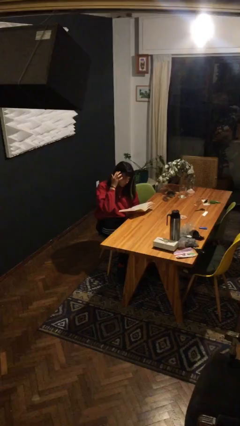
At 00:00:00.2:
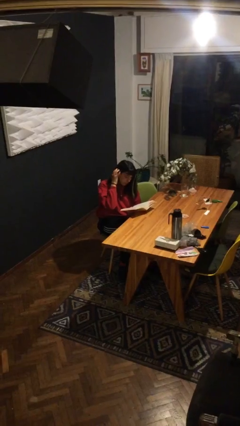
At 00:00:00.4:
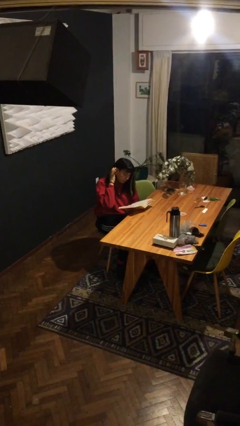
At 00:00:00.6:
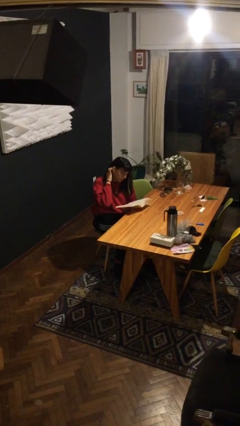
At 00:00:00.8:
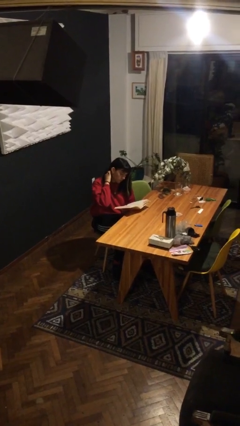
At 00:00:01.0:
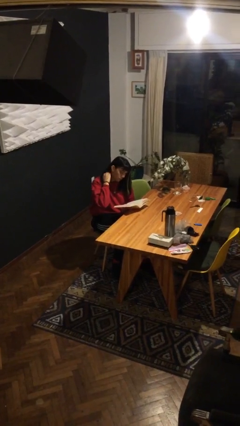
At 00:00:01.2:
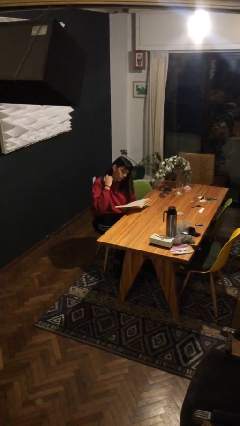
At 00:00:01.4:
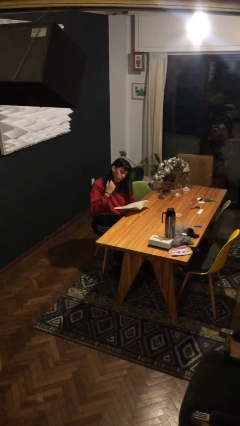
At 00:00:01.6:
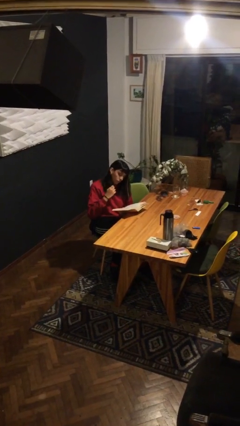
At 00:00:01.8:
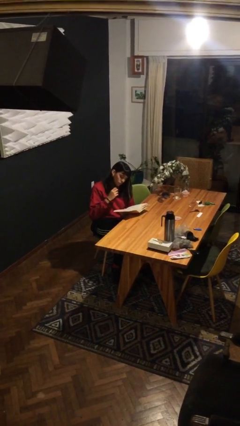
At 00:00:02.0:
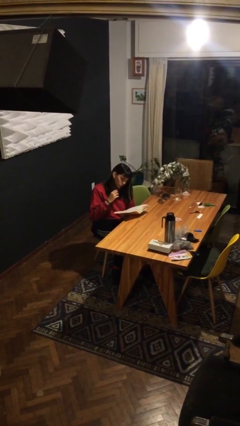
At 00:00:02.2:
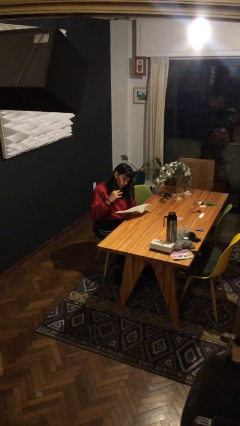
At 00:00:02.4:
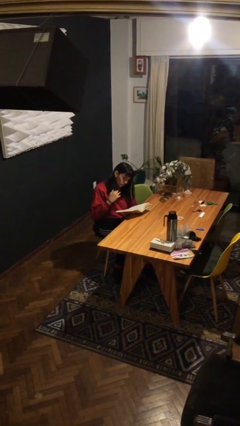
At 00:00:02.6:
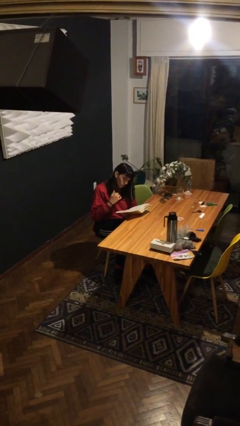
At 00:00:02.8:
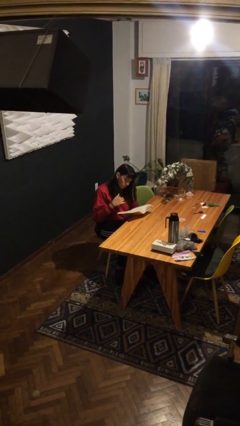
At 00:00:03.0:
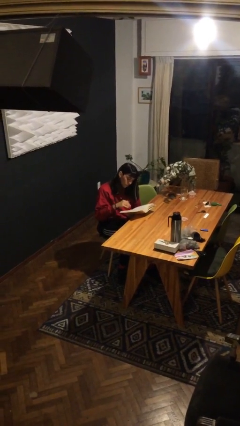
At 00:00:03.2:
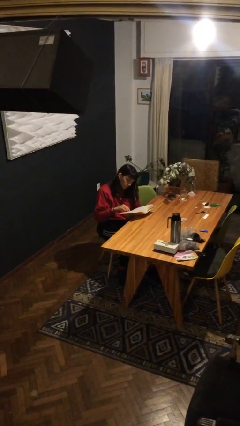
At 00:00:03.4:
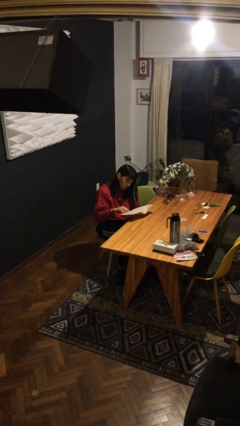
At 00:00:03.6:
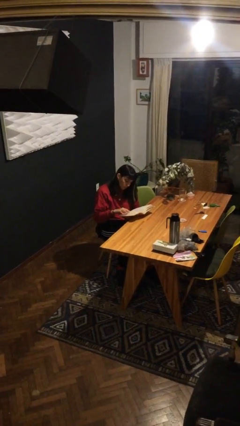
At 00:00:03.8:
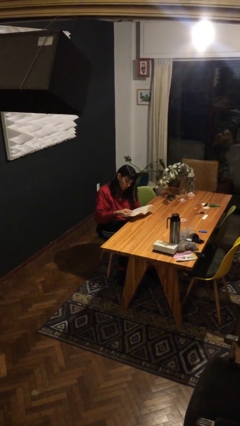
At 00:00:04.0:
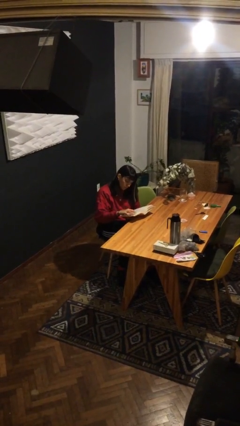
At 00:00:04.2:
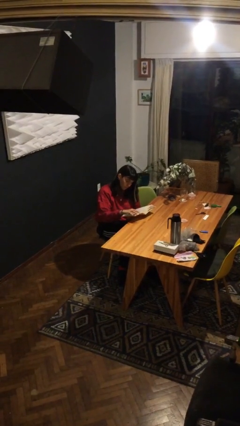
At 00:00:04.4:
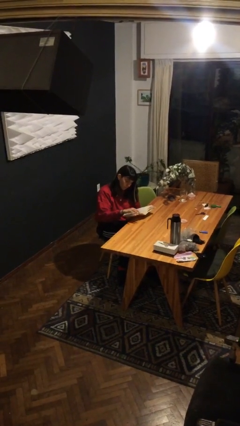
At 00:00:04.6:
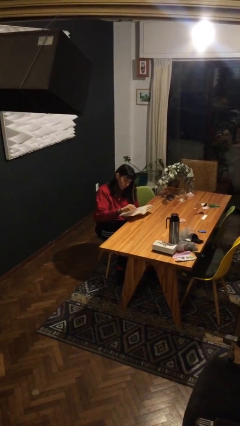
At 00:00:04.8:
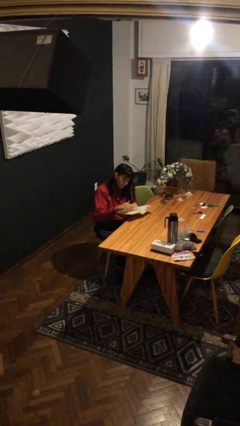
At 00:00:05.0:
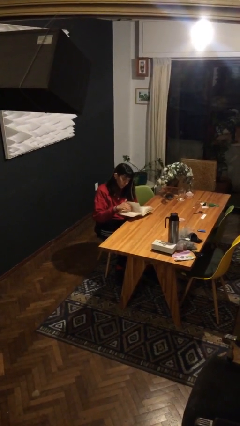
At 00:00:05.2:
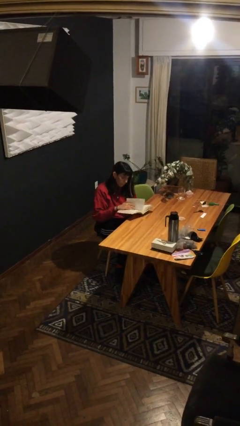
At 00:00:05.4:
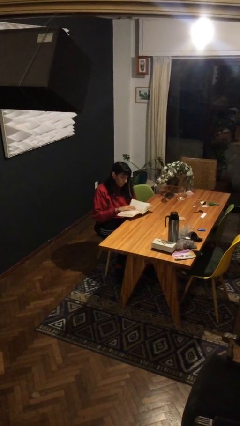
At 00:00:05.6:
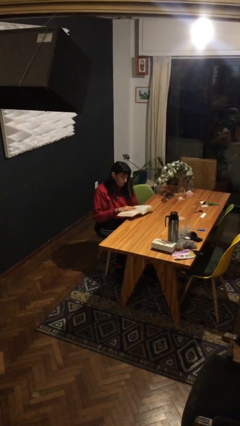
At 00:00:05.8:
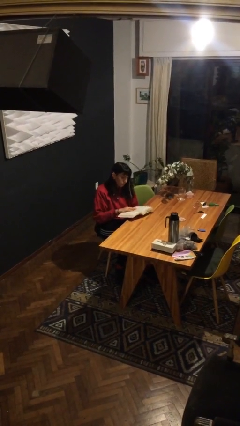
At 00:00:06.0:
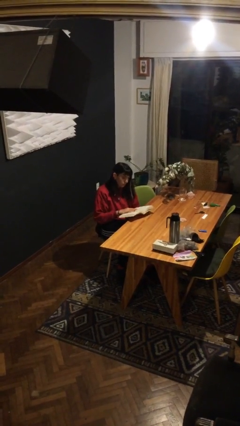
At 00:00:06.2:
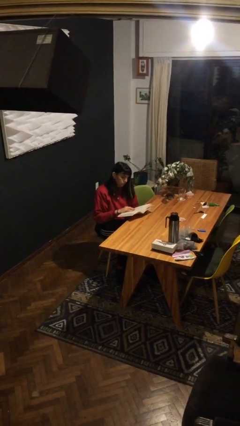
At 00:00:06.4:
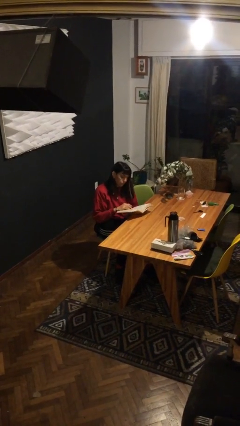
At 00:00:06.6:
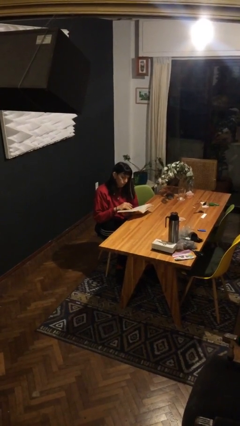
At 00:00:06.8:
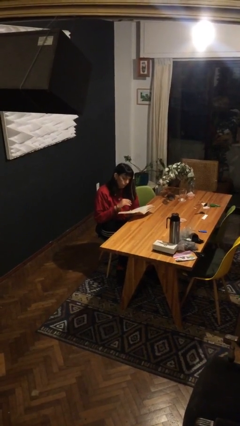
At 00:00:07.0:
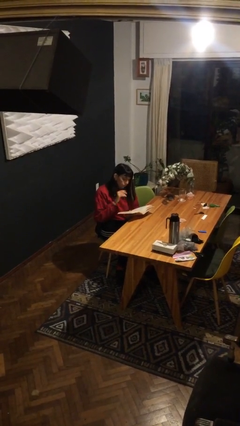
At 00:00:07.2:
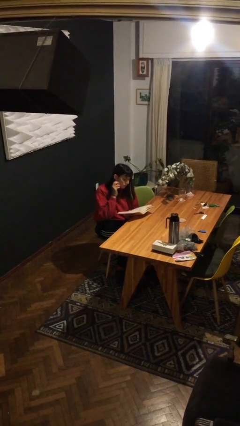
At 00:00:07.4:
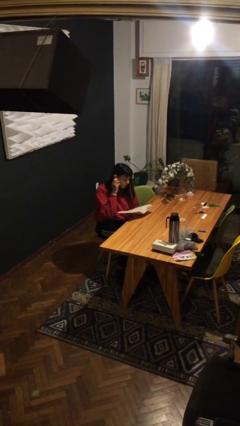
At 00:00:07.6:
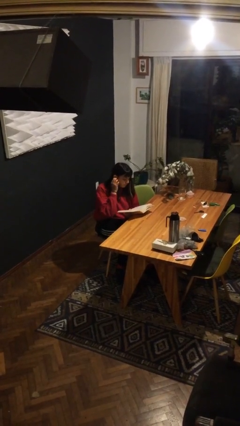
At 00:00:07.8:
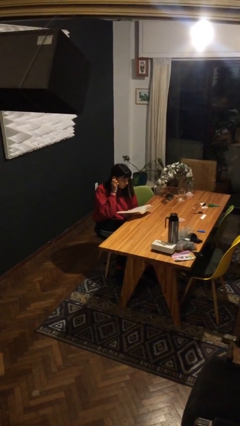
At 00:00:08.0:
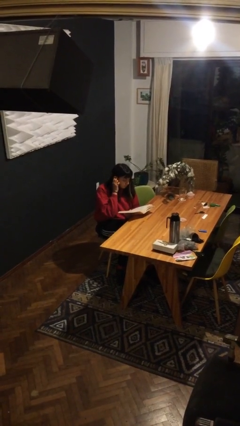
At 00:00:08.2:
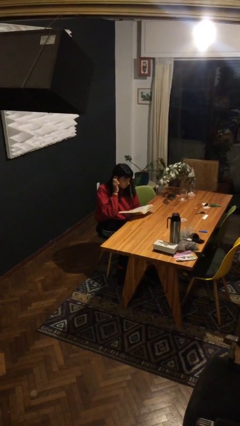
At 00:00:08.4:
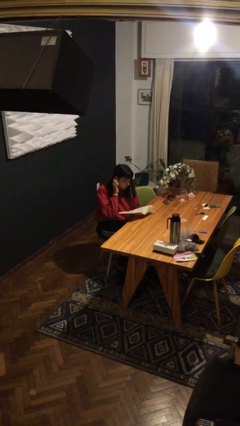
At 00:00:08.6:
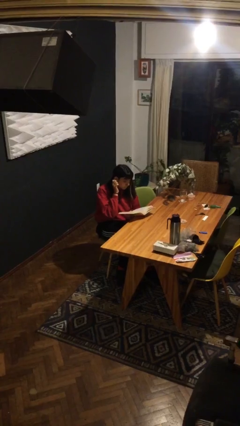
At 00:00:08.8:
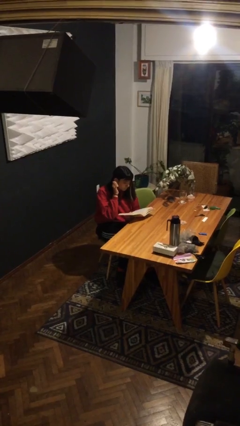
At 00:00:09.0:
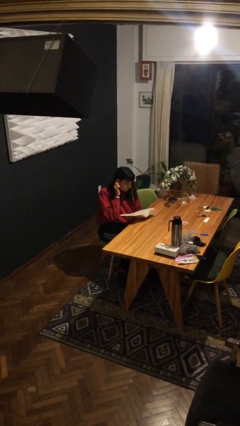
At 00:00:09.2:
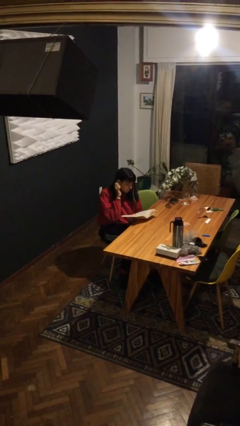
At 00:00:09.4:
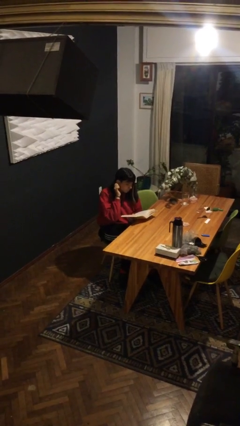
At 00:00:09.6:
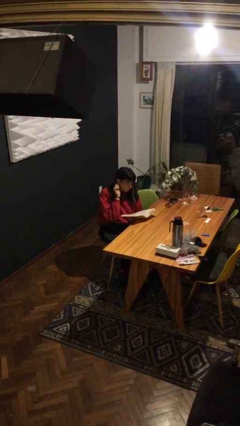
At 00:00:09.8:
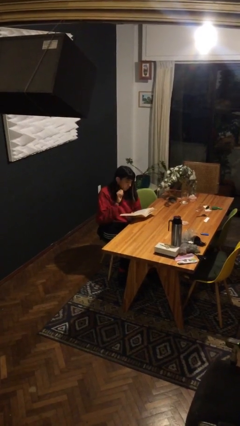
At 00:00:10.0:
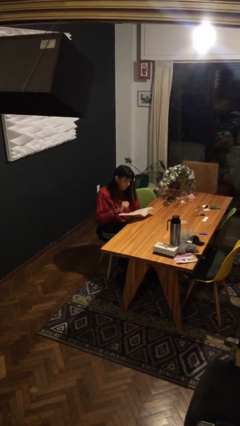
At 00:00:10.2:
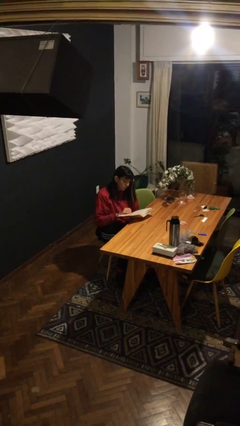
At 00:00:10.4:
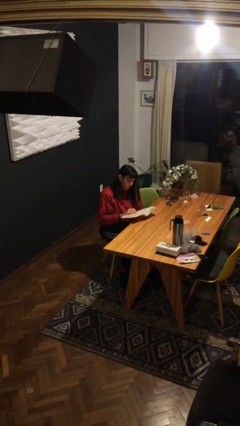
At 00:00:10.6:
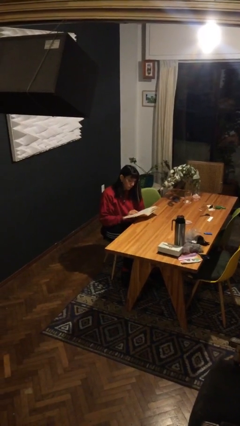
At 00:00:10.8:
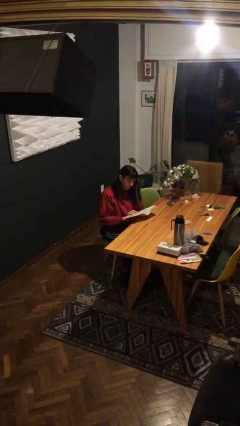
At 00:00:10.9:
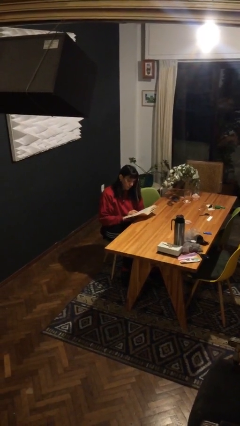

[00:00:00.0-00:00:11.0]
person reads document

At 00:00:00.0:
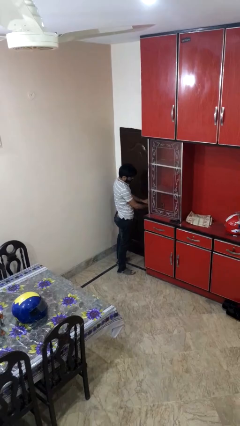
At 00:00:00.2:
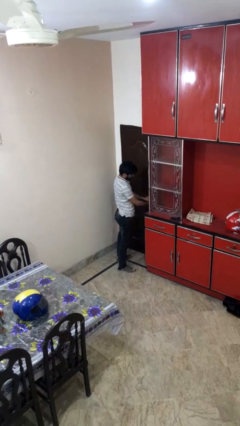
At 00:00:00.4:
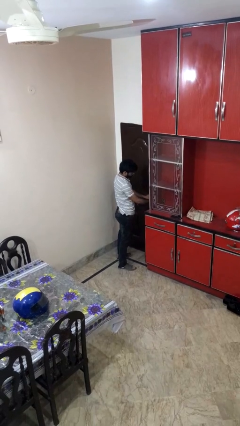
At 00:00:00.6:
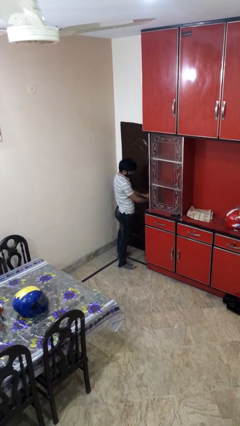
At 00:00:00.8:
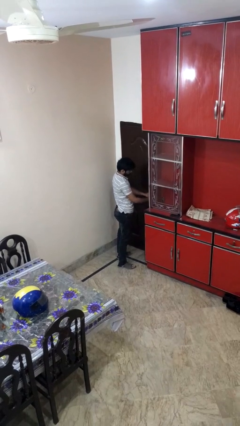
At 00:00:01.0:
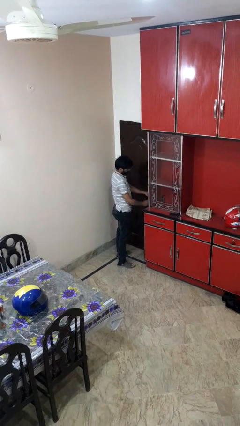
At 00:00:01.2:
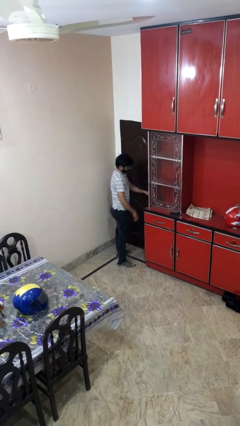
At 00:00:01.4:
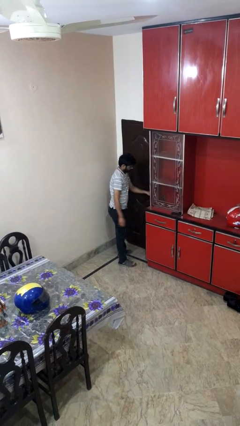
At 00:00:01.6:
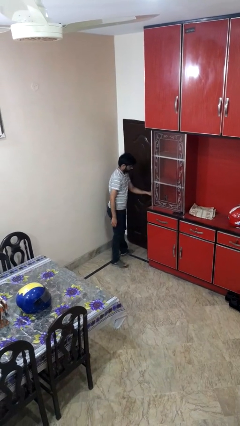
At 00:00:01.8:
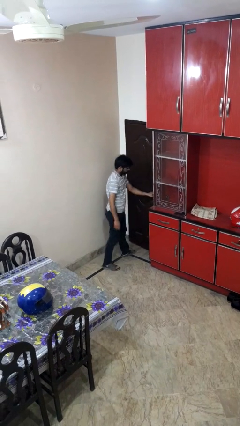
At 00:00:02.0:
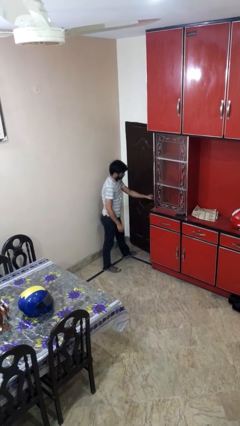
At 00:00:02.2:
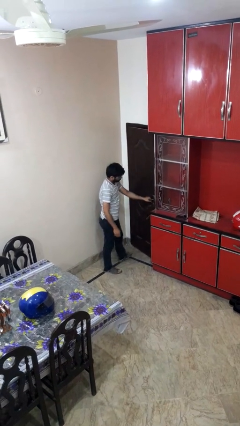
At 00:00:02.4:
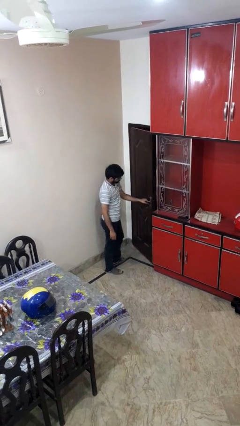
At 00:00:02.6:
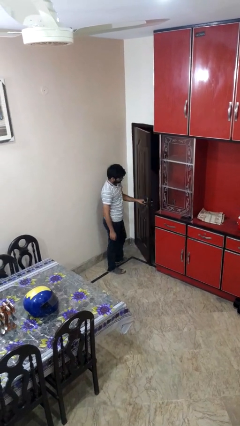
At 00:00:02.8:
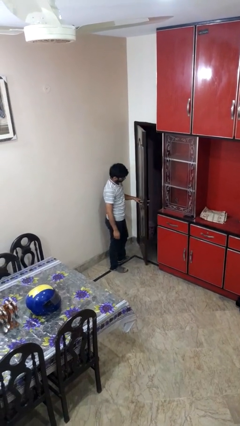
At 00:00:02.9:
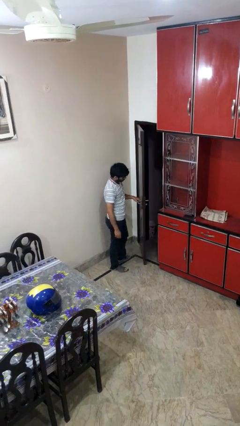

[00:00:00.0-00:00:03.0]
person opens facility door

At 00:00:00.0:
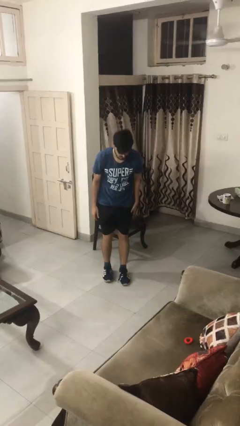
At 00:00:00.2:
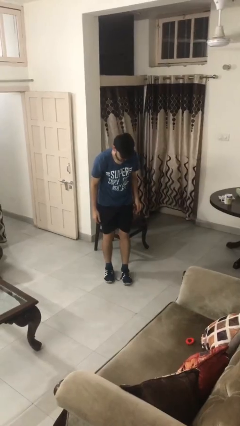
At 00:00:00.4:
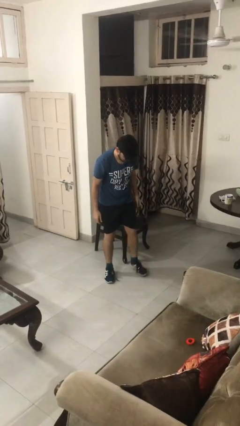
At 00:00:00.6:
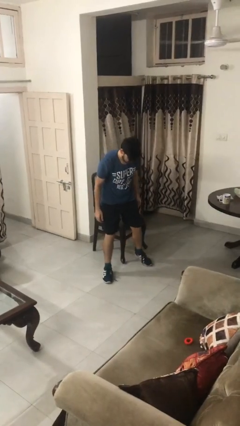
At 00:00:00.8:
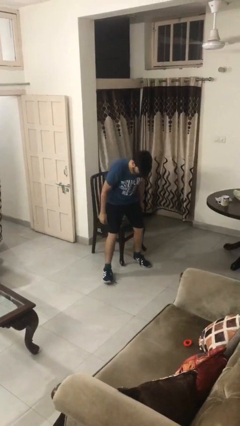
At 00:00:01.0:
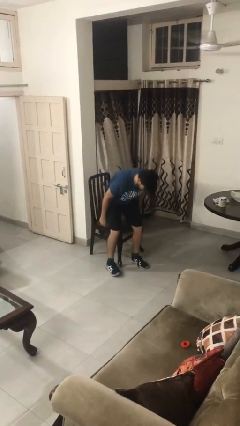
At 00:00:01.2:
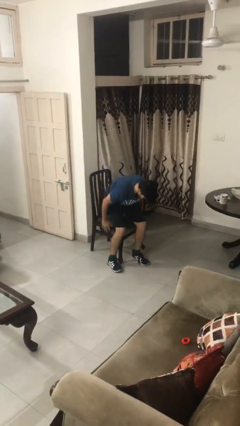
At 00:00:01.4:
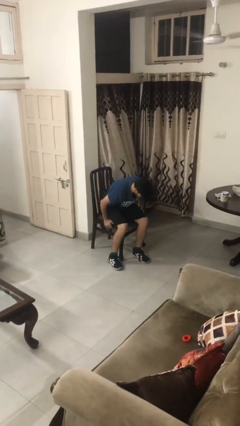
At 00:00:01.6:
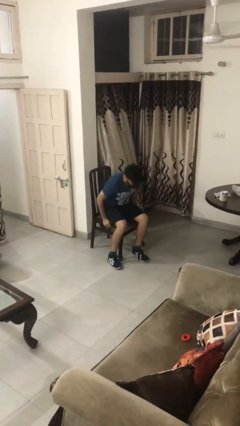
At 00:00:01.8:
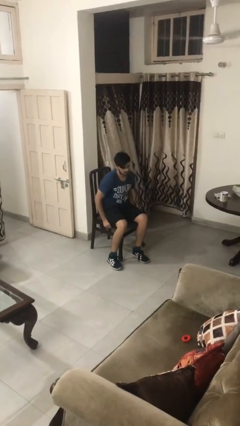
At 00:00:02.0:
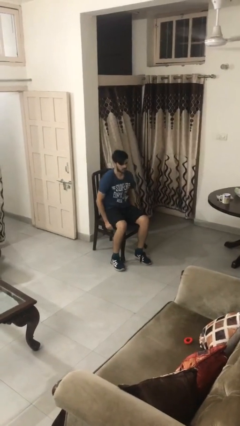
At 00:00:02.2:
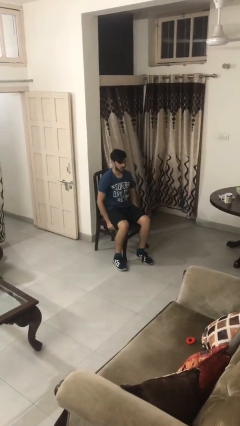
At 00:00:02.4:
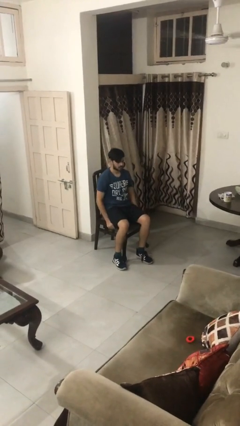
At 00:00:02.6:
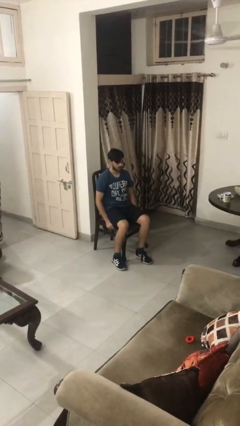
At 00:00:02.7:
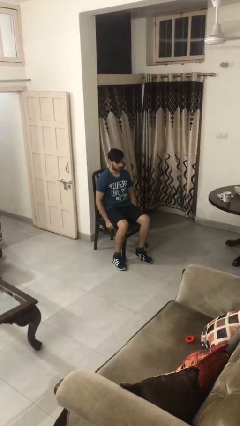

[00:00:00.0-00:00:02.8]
person sits down

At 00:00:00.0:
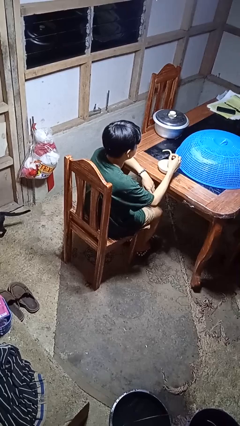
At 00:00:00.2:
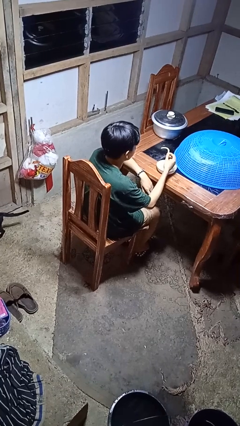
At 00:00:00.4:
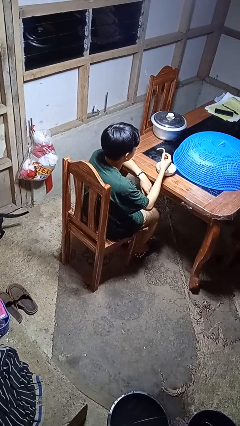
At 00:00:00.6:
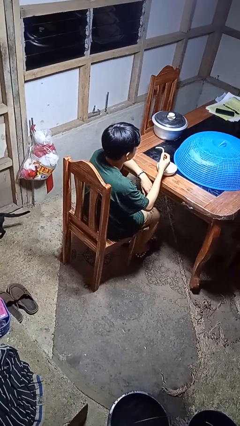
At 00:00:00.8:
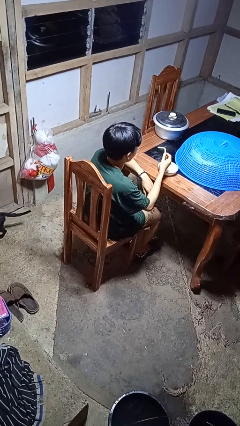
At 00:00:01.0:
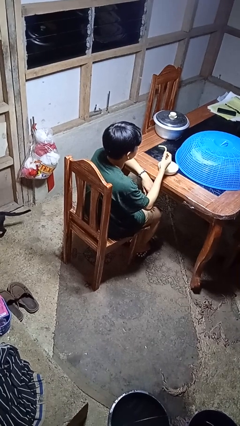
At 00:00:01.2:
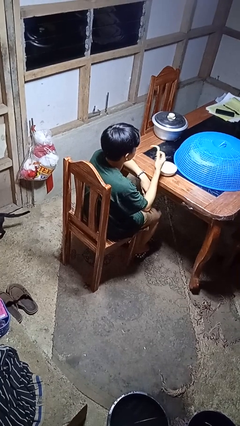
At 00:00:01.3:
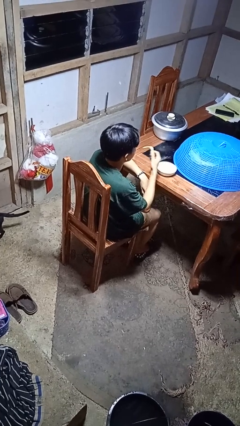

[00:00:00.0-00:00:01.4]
person eats with hands
